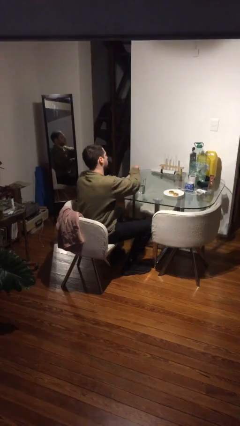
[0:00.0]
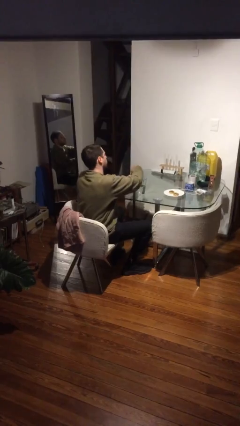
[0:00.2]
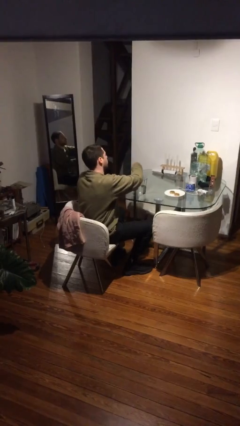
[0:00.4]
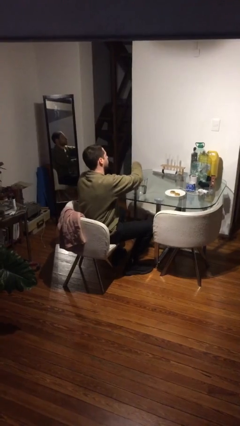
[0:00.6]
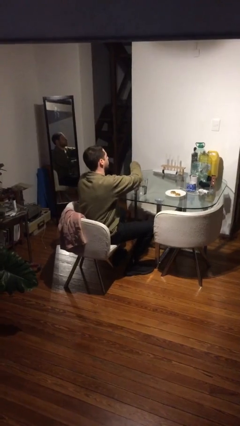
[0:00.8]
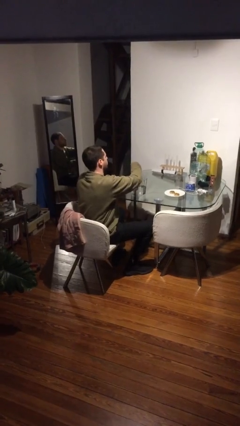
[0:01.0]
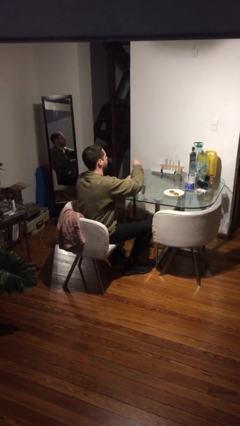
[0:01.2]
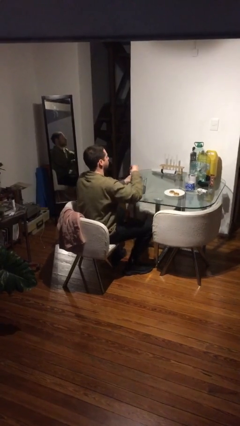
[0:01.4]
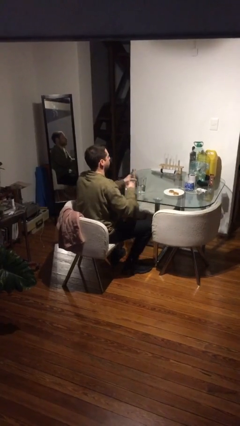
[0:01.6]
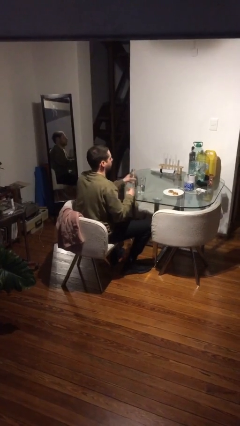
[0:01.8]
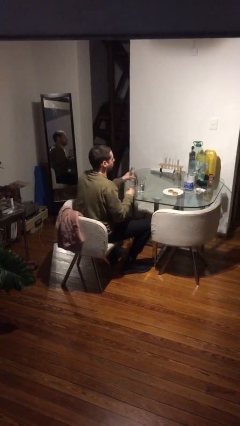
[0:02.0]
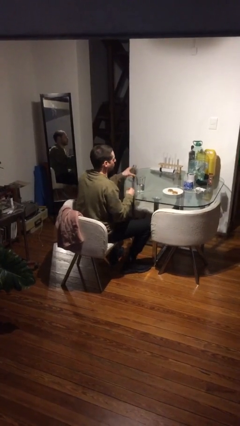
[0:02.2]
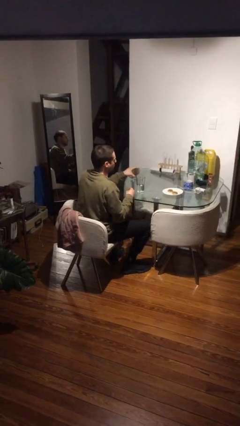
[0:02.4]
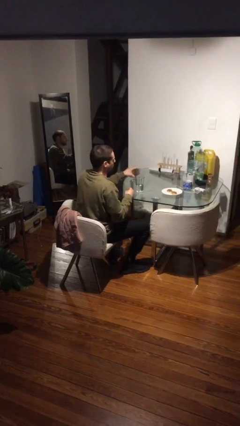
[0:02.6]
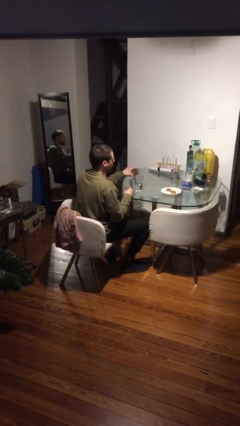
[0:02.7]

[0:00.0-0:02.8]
person unscrews lid from bottle

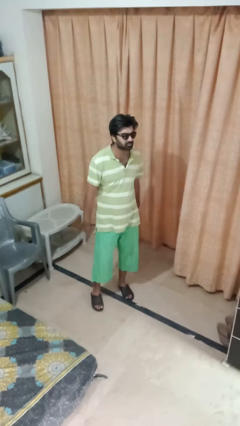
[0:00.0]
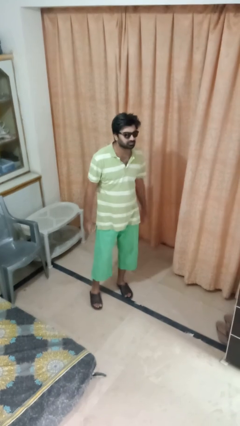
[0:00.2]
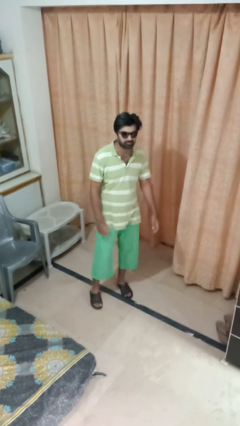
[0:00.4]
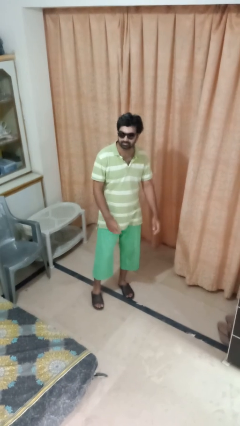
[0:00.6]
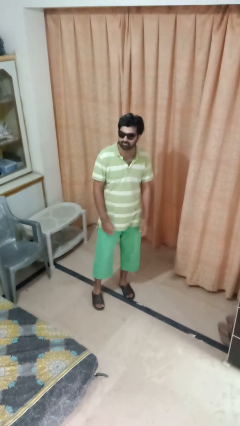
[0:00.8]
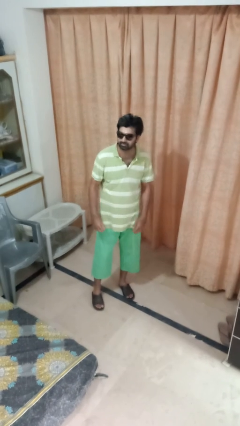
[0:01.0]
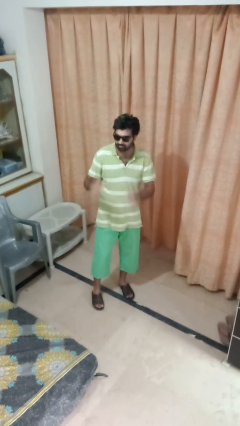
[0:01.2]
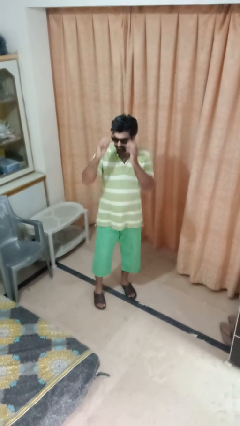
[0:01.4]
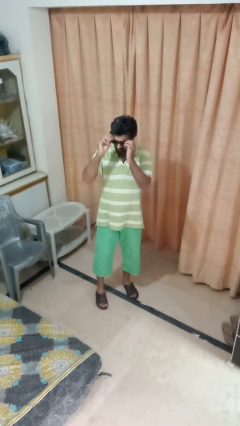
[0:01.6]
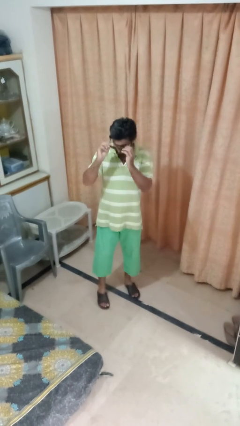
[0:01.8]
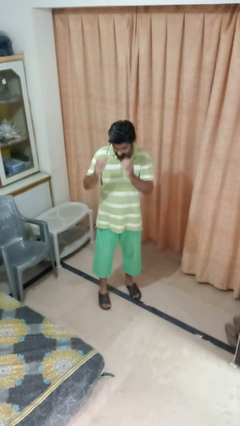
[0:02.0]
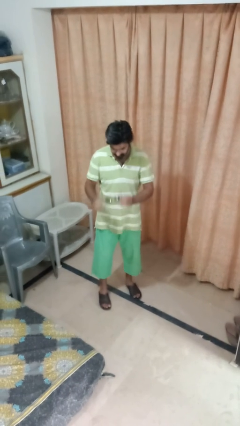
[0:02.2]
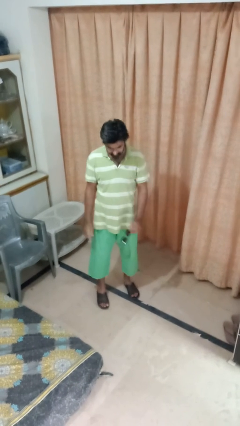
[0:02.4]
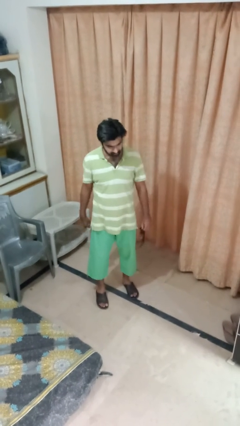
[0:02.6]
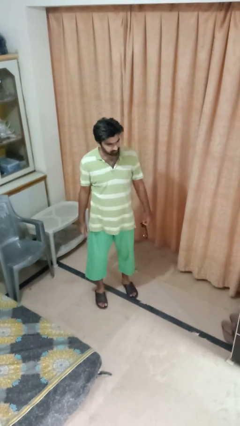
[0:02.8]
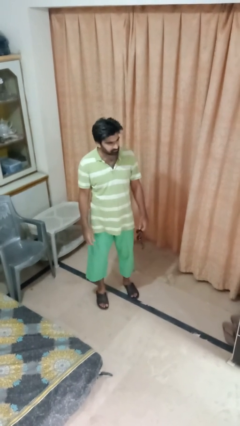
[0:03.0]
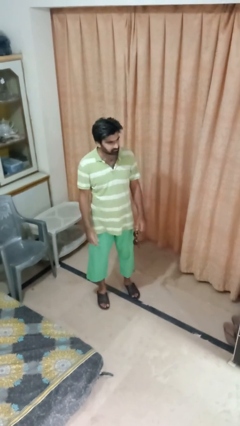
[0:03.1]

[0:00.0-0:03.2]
person takes off sunglasses

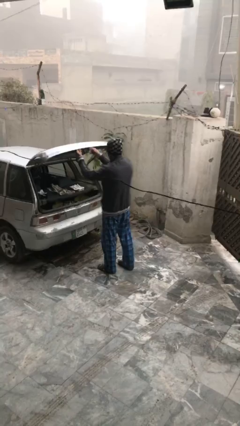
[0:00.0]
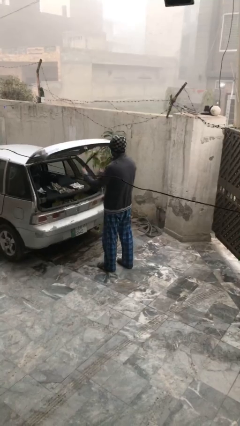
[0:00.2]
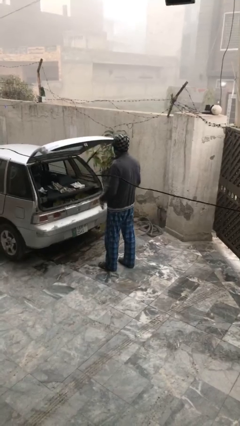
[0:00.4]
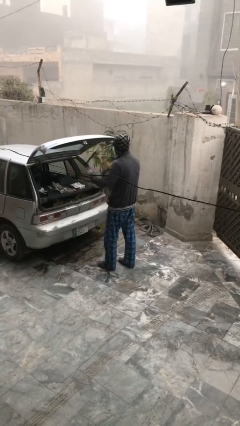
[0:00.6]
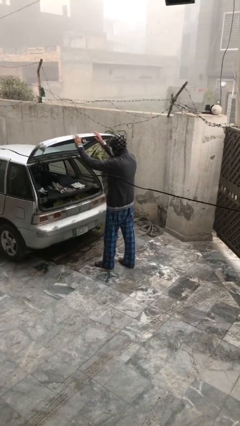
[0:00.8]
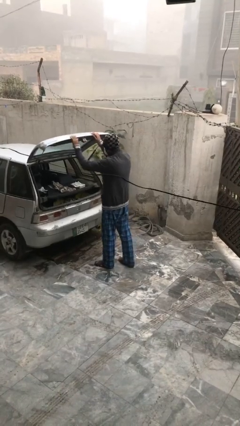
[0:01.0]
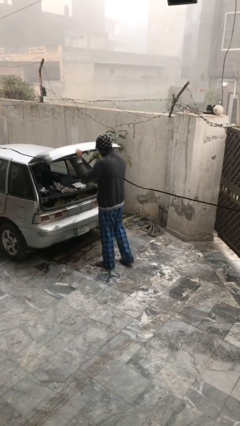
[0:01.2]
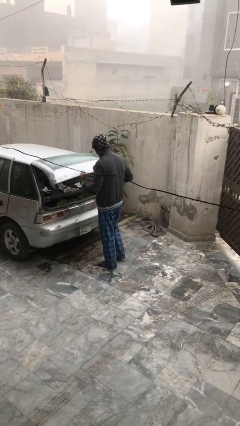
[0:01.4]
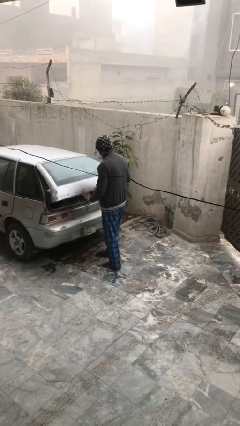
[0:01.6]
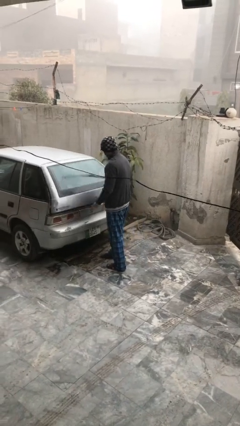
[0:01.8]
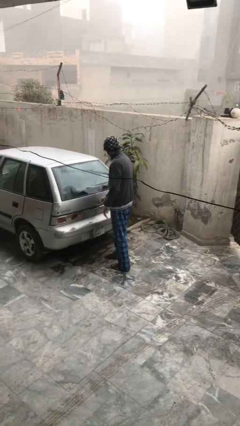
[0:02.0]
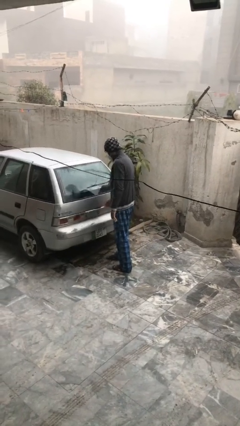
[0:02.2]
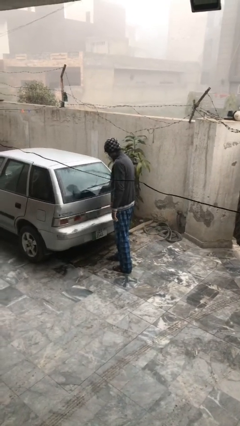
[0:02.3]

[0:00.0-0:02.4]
person closes car trunk

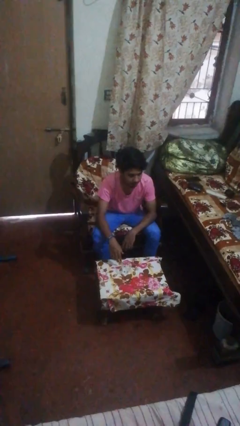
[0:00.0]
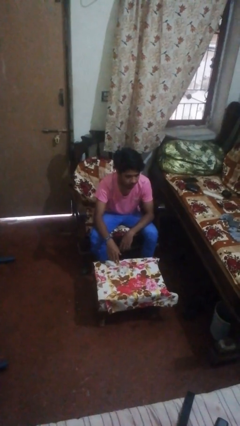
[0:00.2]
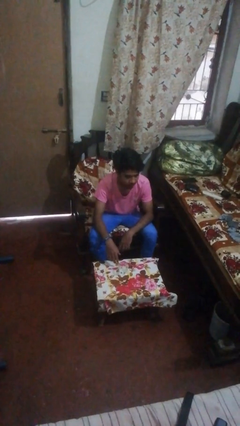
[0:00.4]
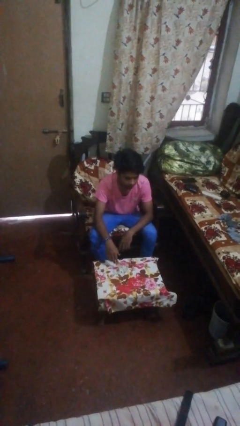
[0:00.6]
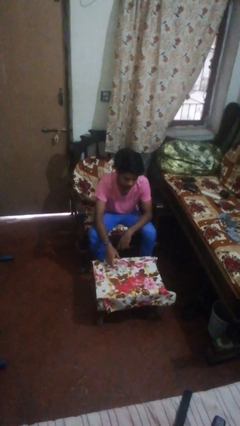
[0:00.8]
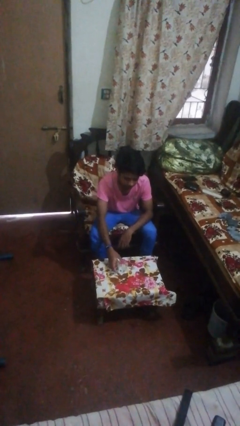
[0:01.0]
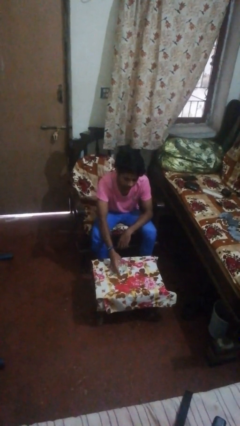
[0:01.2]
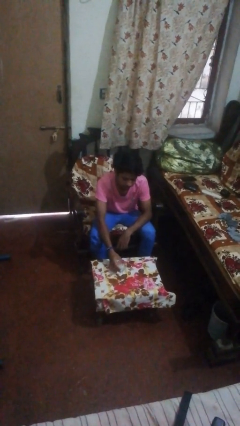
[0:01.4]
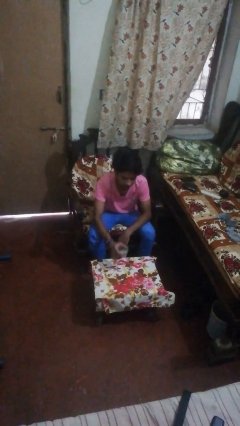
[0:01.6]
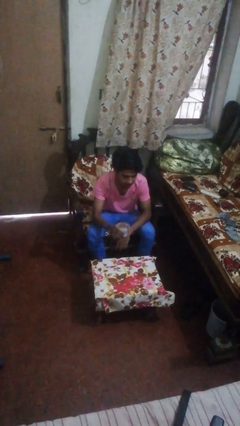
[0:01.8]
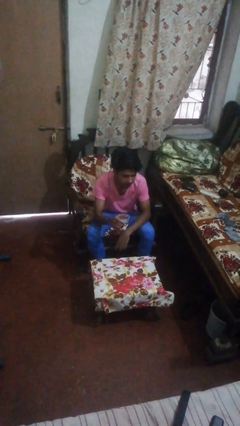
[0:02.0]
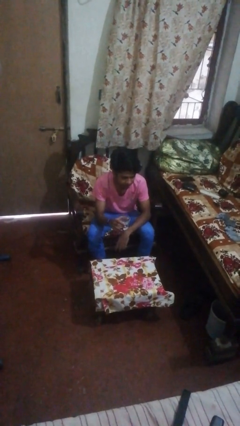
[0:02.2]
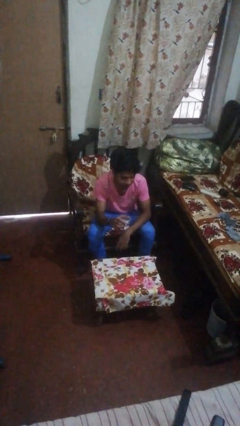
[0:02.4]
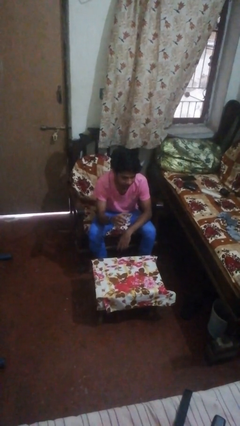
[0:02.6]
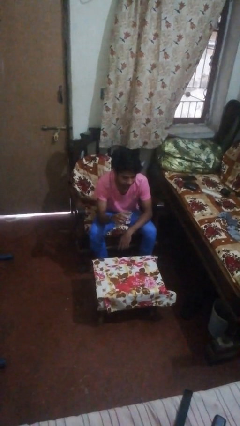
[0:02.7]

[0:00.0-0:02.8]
person picks up object from table

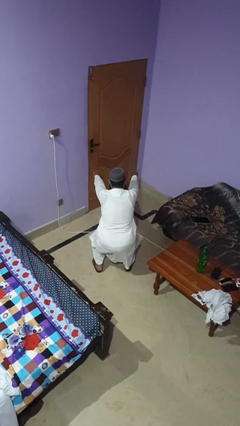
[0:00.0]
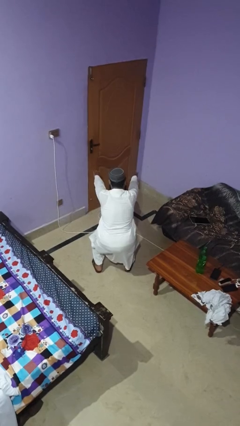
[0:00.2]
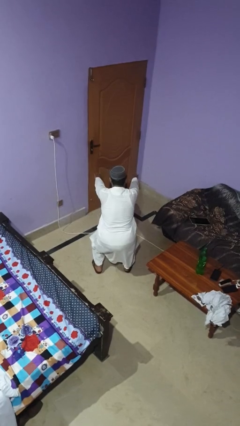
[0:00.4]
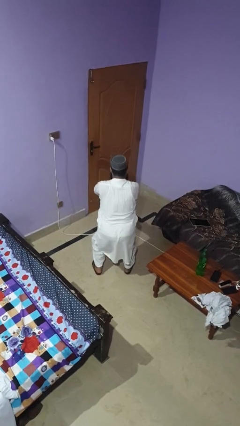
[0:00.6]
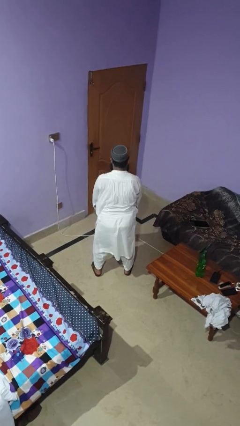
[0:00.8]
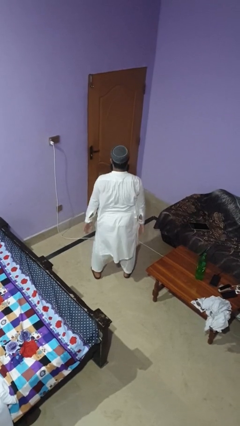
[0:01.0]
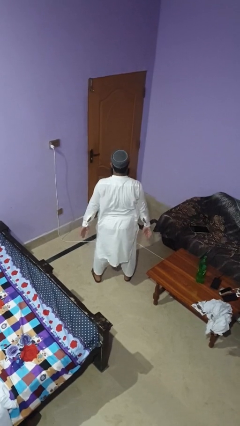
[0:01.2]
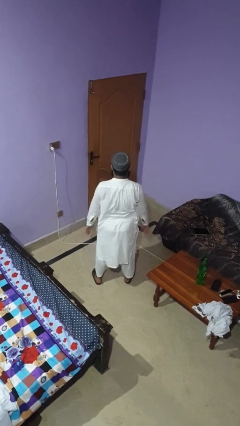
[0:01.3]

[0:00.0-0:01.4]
person stands up

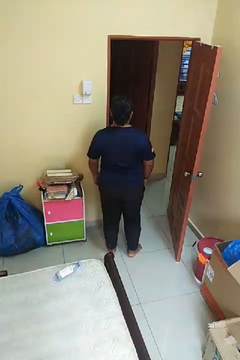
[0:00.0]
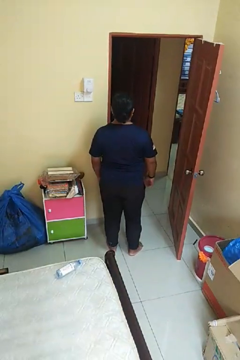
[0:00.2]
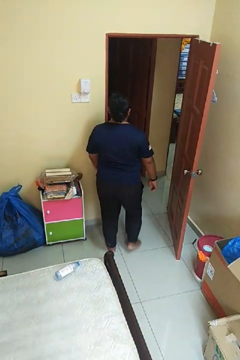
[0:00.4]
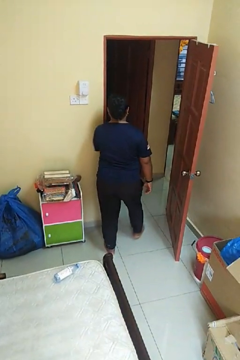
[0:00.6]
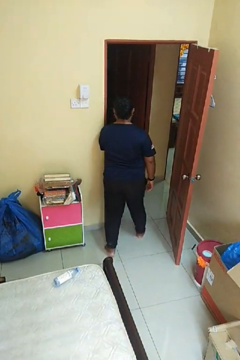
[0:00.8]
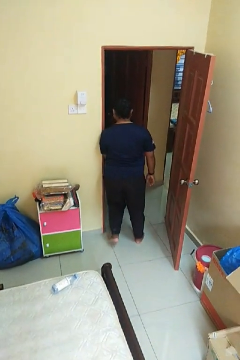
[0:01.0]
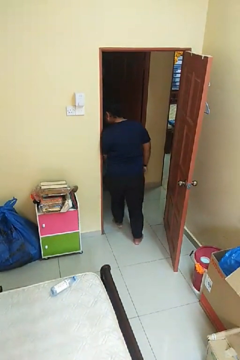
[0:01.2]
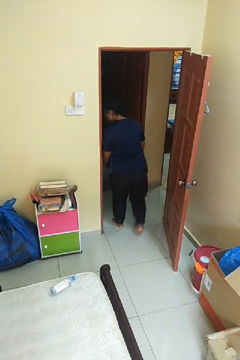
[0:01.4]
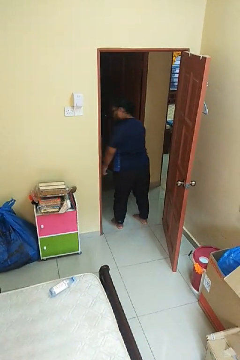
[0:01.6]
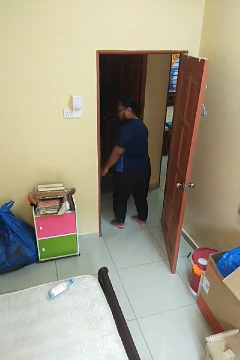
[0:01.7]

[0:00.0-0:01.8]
person bumps into wall

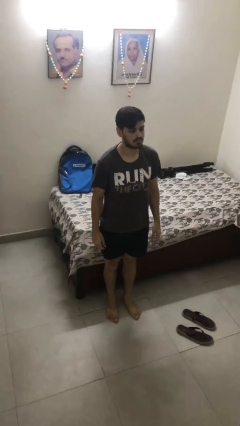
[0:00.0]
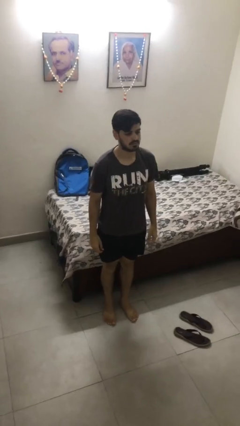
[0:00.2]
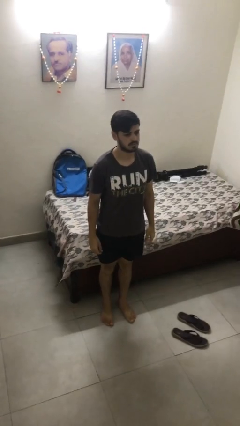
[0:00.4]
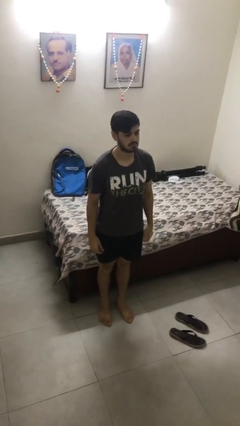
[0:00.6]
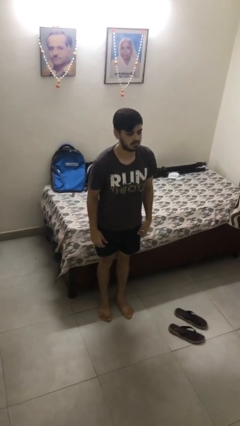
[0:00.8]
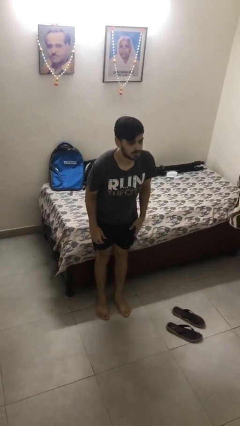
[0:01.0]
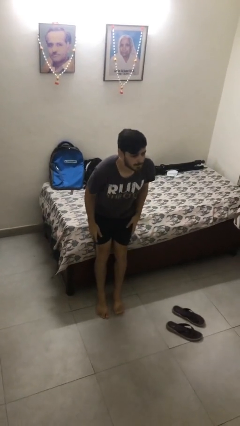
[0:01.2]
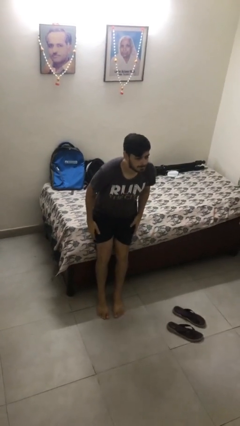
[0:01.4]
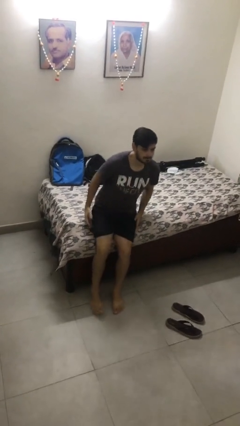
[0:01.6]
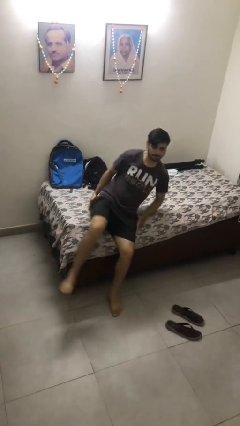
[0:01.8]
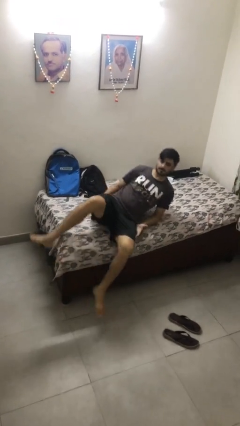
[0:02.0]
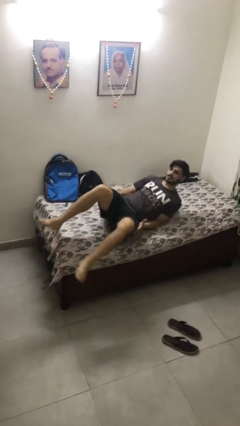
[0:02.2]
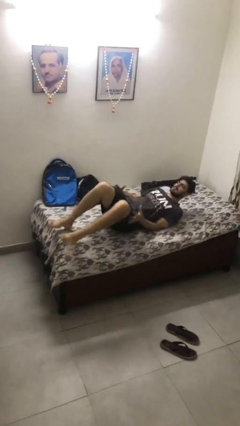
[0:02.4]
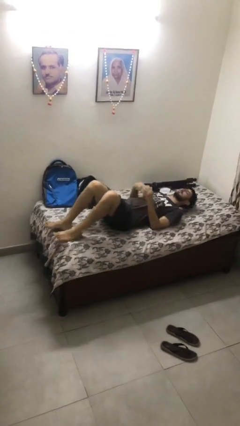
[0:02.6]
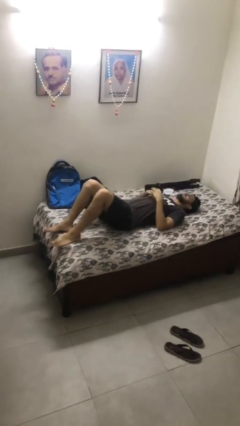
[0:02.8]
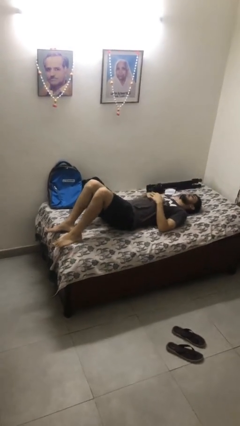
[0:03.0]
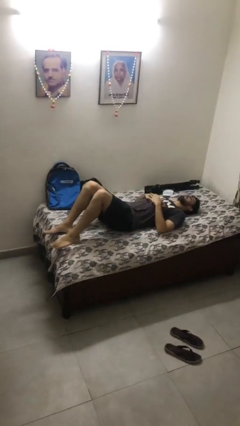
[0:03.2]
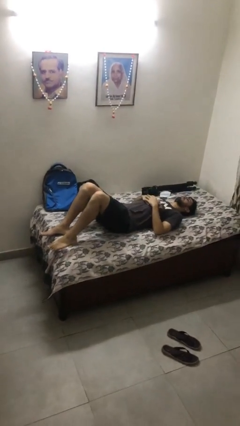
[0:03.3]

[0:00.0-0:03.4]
person lies down on bed
